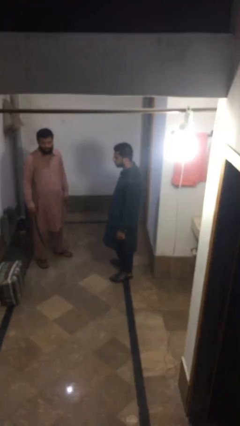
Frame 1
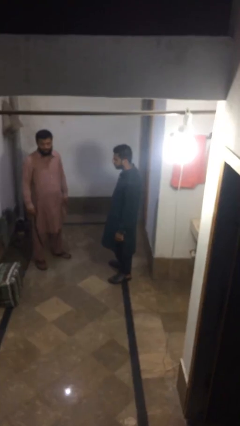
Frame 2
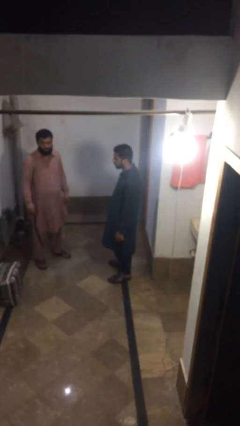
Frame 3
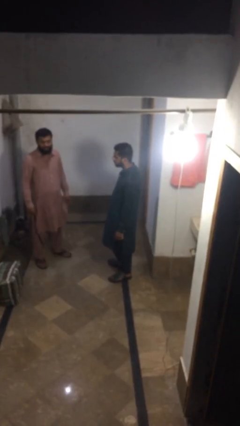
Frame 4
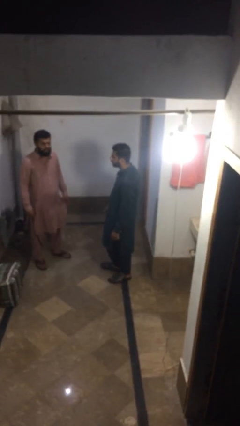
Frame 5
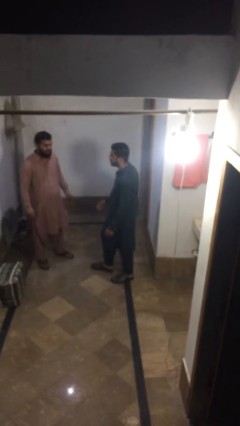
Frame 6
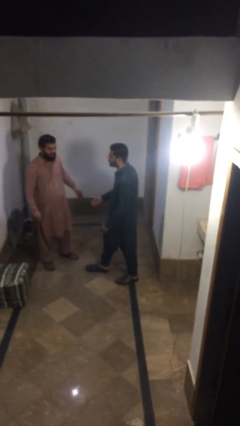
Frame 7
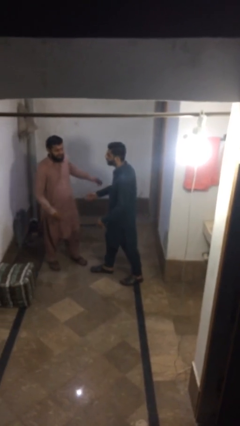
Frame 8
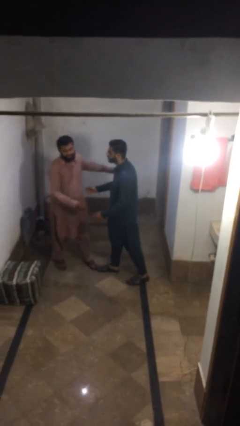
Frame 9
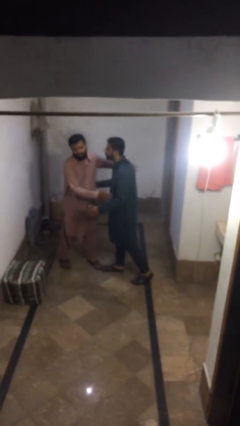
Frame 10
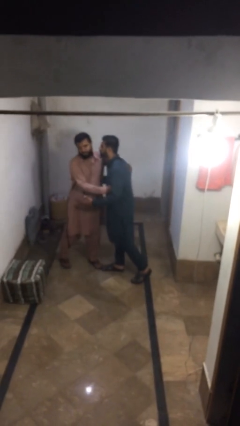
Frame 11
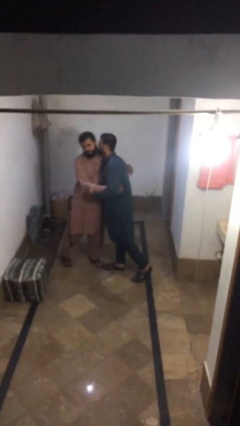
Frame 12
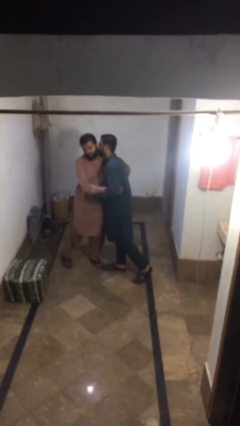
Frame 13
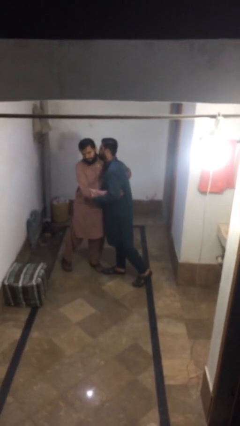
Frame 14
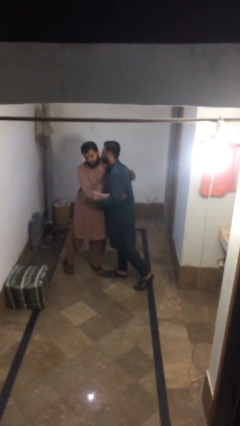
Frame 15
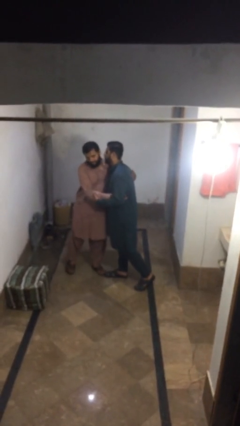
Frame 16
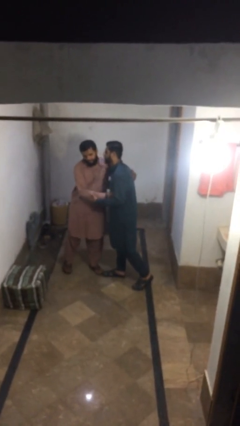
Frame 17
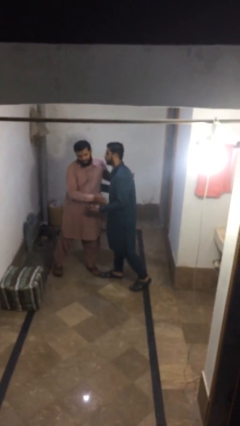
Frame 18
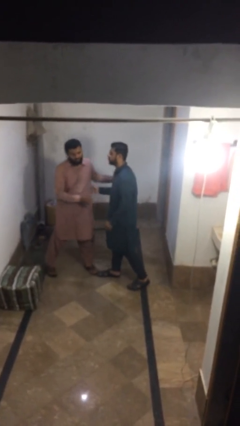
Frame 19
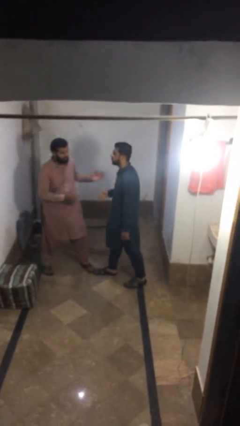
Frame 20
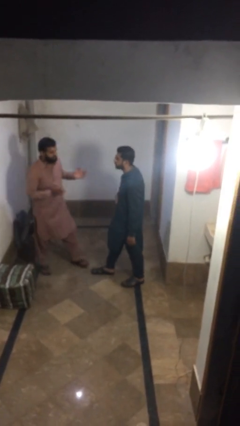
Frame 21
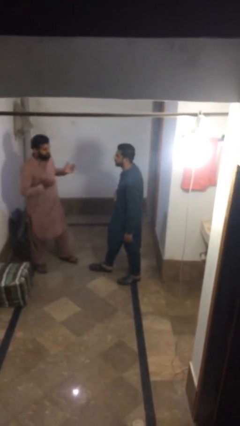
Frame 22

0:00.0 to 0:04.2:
person embraces person

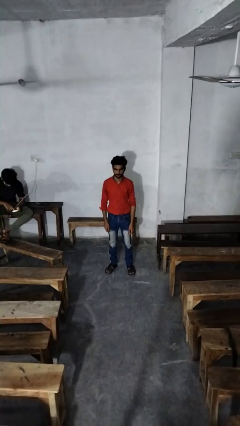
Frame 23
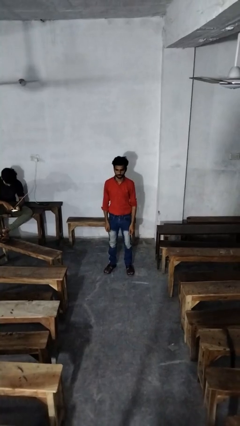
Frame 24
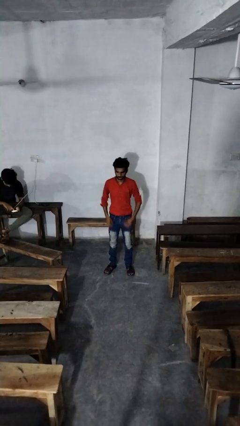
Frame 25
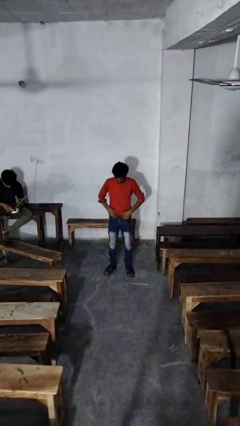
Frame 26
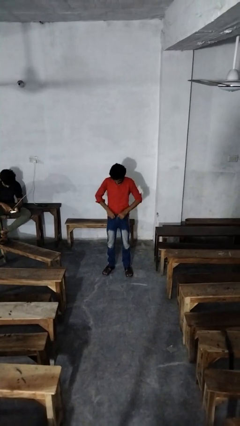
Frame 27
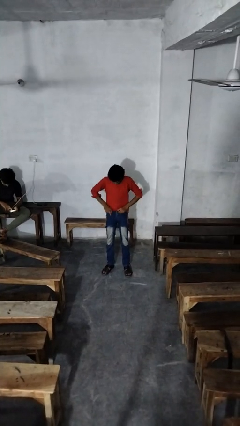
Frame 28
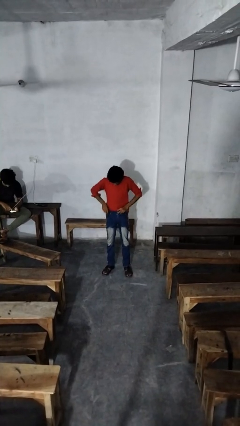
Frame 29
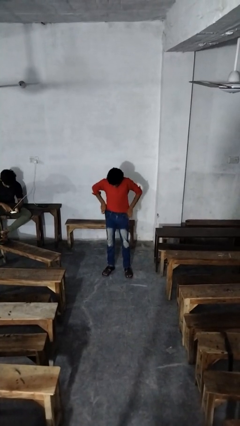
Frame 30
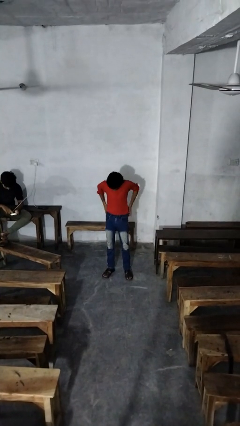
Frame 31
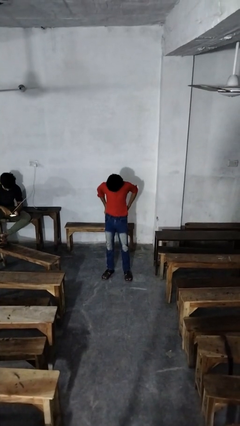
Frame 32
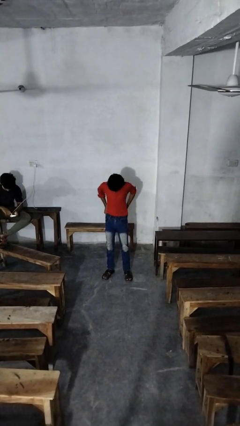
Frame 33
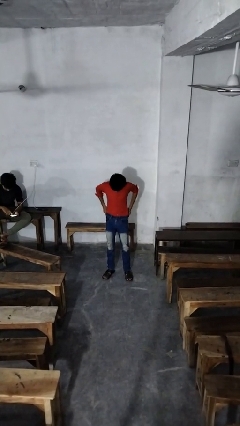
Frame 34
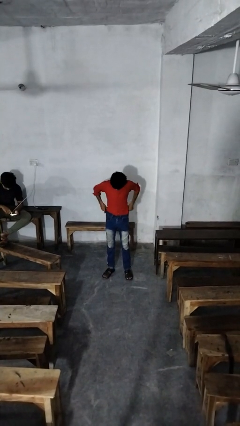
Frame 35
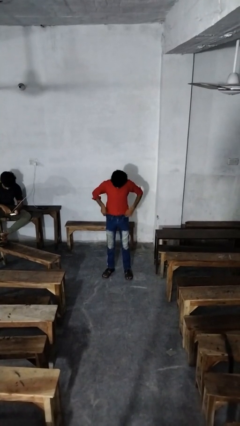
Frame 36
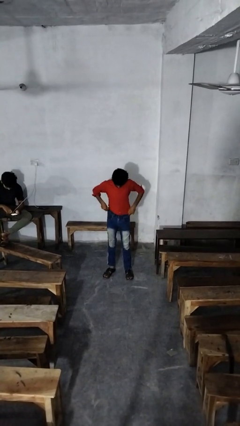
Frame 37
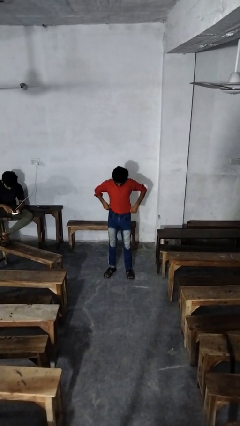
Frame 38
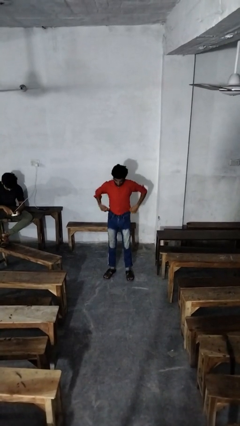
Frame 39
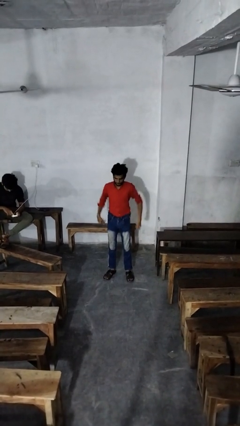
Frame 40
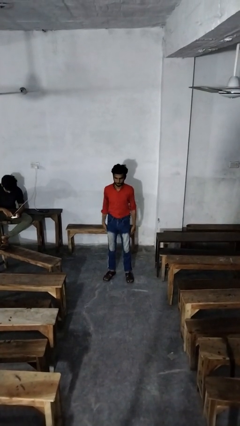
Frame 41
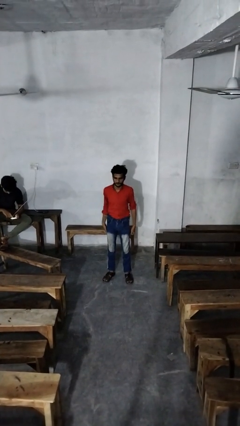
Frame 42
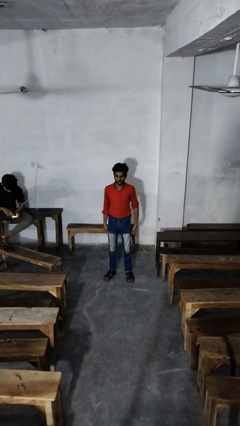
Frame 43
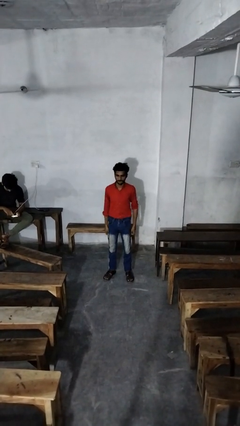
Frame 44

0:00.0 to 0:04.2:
person hikes up pants

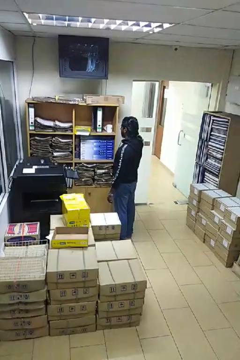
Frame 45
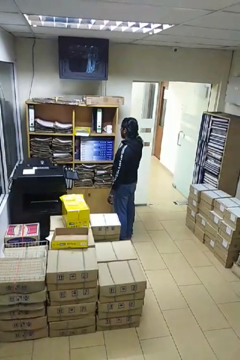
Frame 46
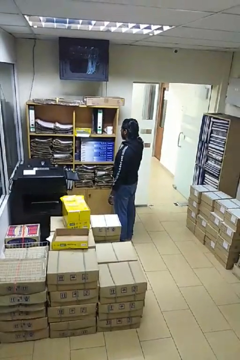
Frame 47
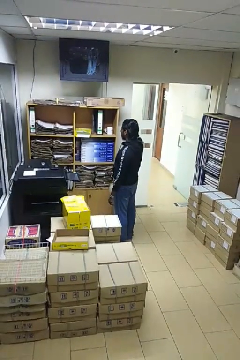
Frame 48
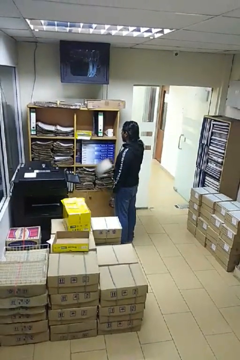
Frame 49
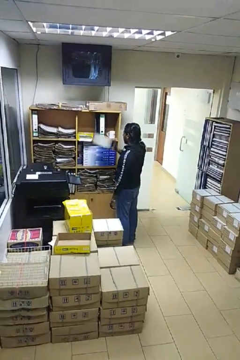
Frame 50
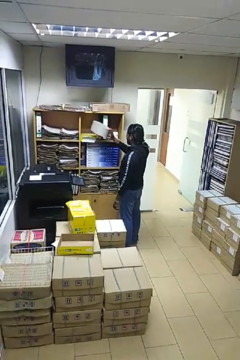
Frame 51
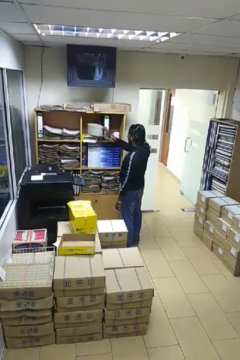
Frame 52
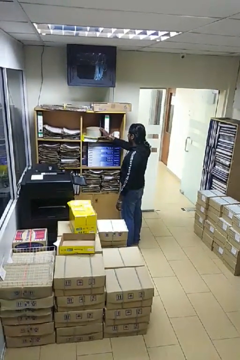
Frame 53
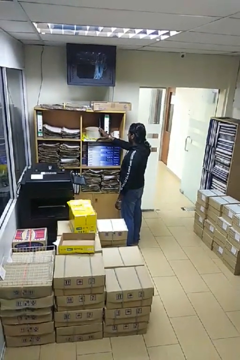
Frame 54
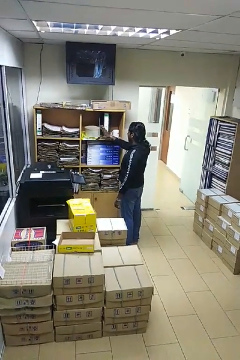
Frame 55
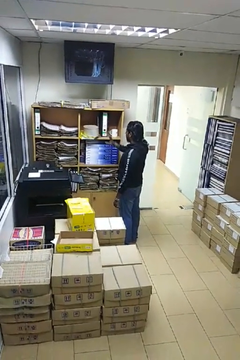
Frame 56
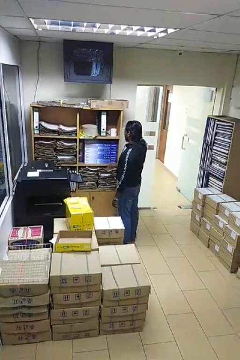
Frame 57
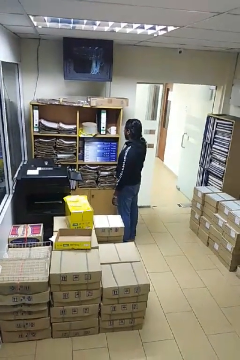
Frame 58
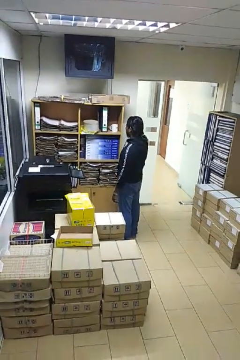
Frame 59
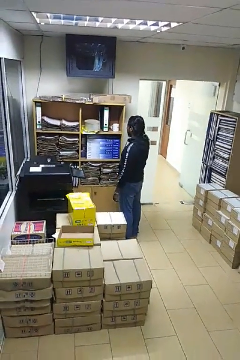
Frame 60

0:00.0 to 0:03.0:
person puts down object into cabinet

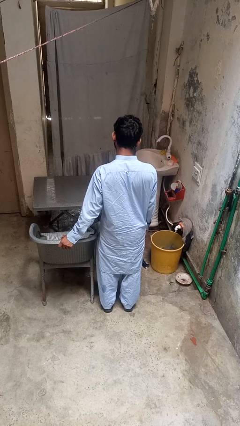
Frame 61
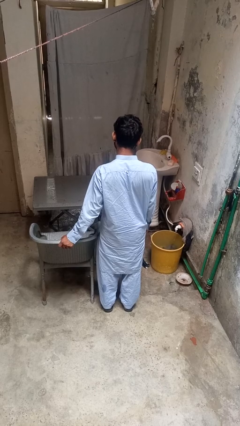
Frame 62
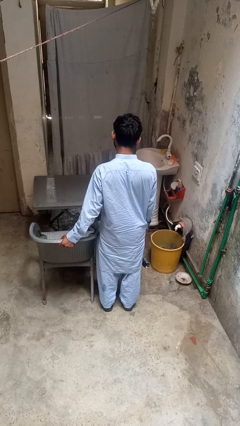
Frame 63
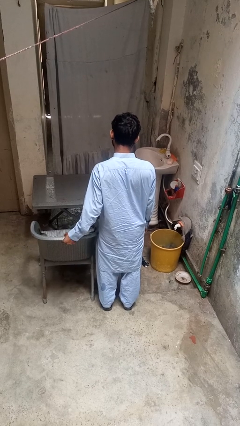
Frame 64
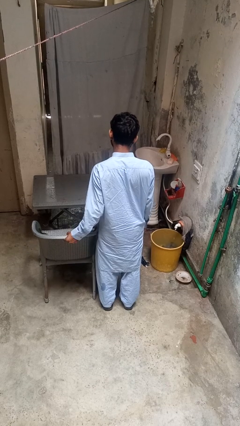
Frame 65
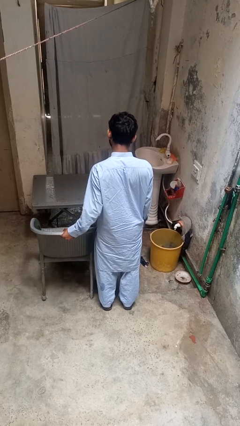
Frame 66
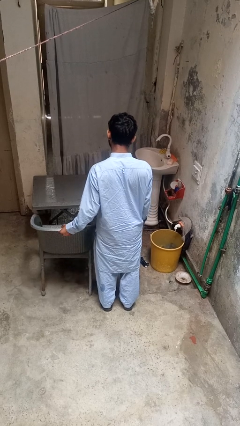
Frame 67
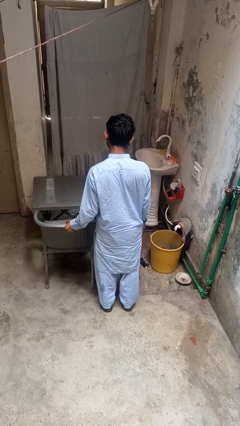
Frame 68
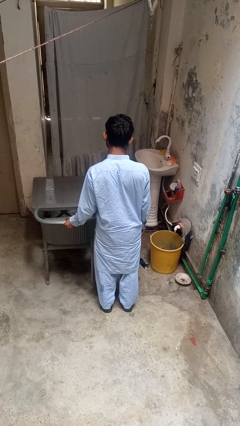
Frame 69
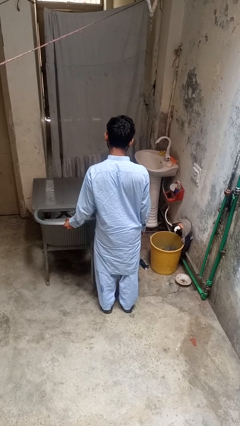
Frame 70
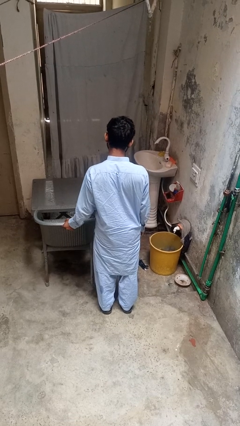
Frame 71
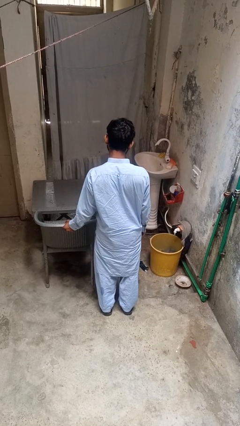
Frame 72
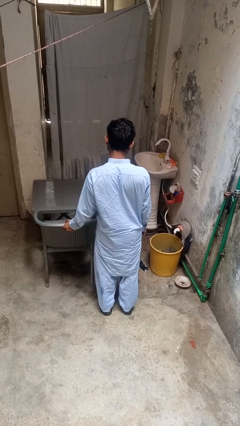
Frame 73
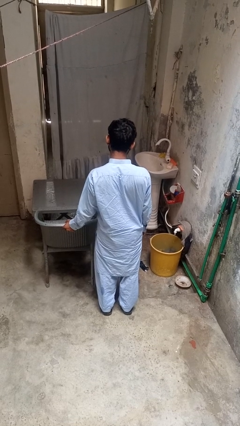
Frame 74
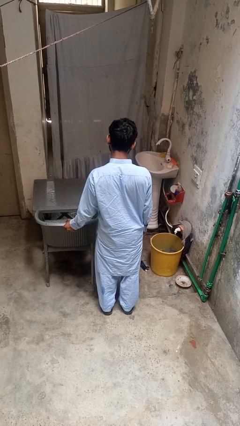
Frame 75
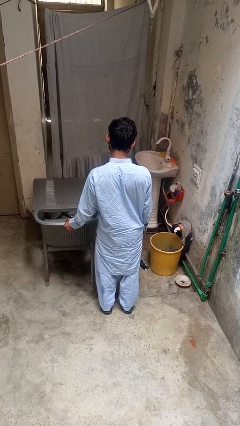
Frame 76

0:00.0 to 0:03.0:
person pushes in chair

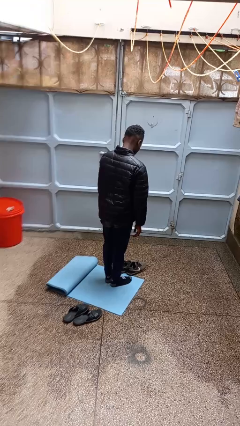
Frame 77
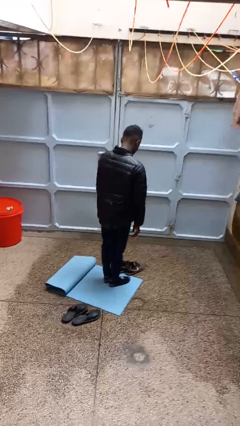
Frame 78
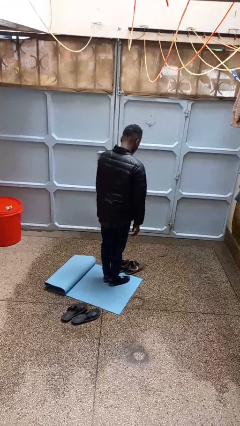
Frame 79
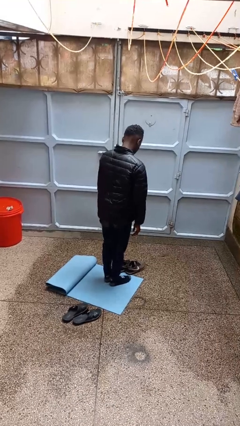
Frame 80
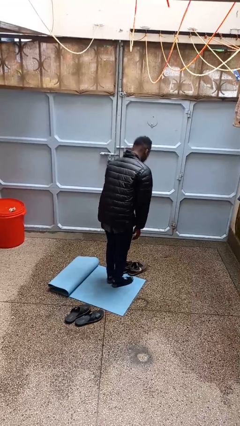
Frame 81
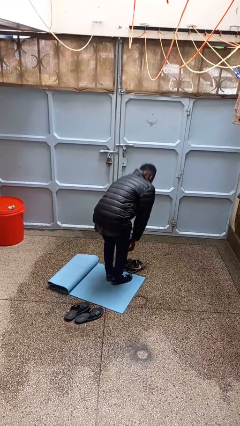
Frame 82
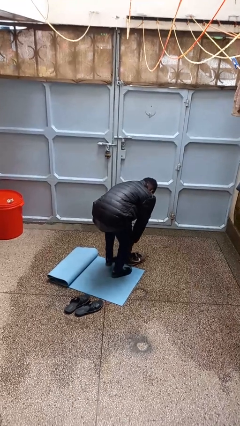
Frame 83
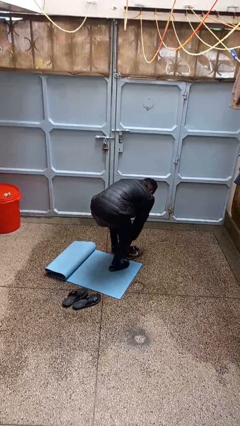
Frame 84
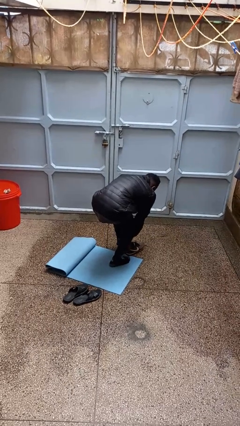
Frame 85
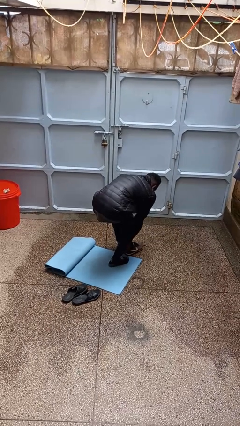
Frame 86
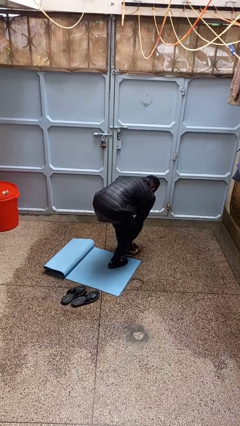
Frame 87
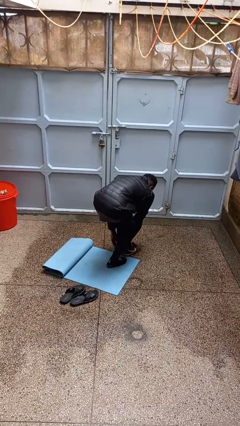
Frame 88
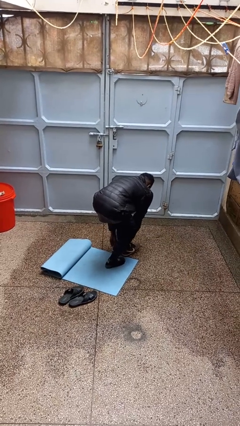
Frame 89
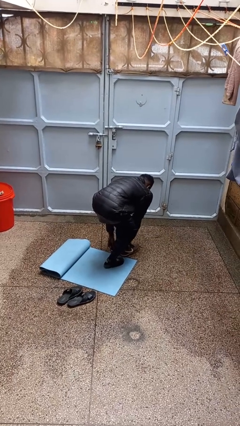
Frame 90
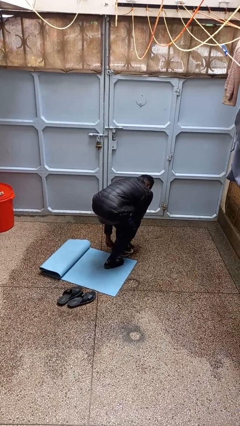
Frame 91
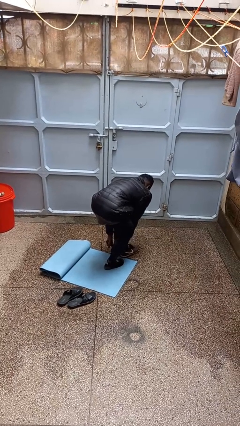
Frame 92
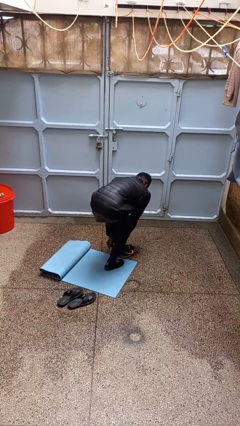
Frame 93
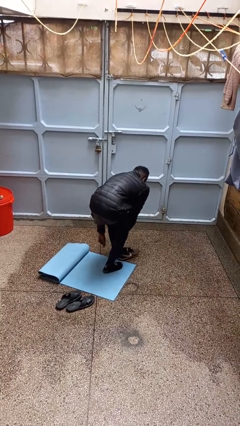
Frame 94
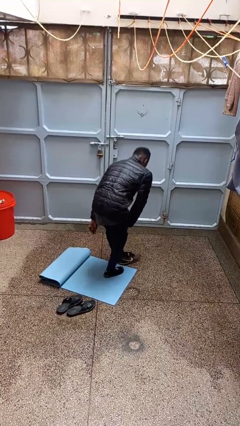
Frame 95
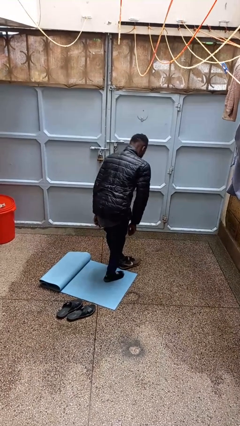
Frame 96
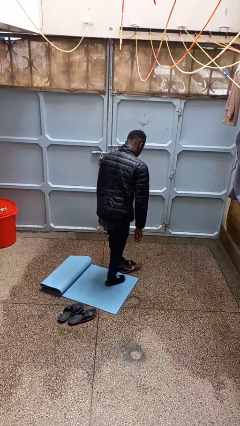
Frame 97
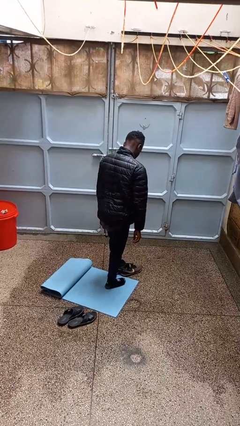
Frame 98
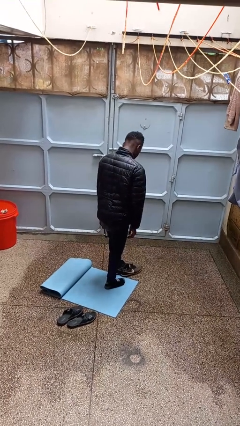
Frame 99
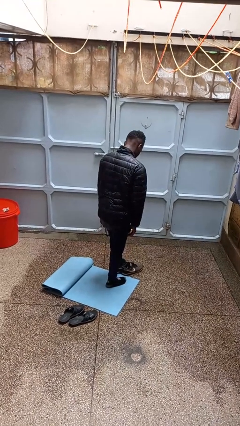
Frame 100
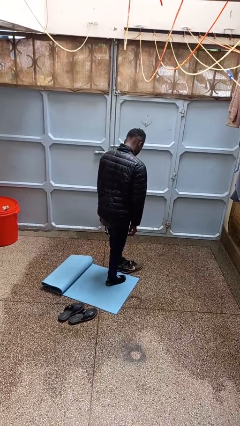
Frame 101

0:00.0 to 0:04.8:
person puts on shoes
